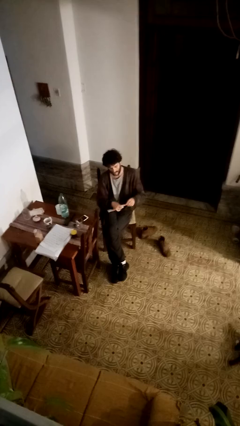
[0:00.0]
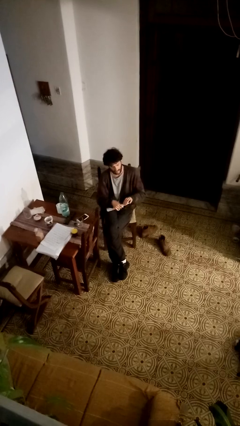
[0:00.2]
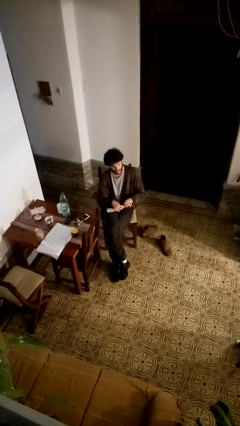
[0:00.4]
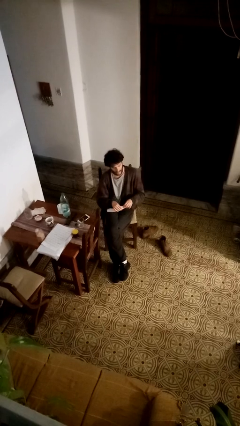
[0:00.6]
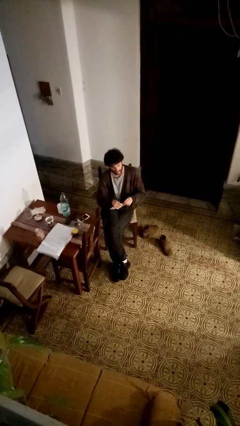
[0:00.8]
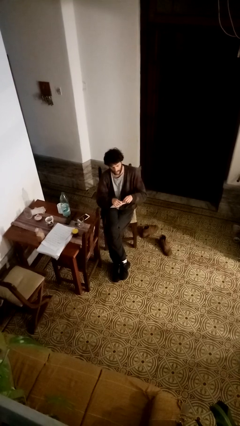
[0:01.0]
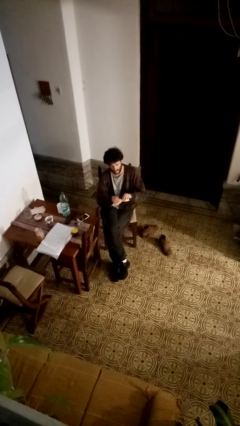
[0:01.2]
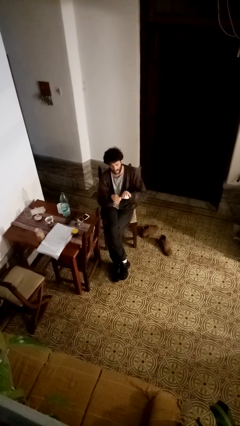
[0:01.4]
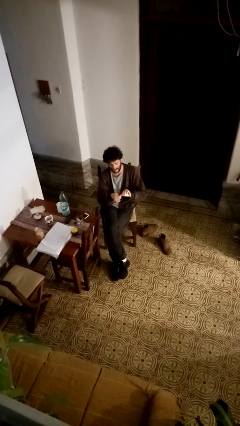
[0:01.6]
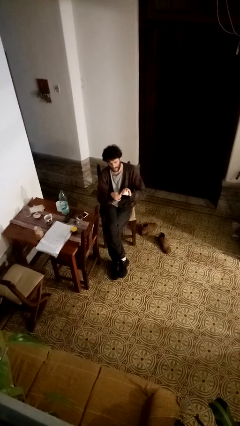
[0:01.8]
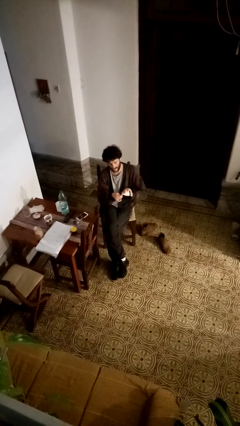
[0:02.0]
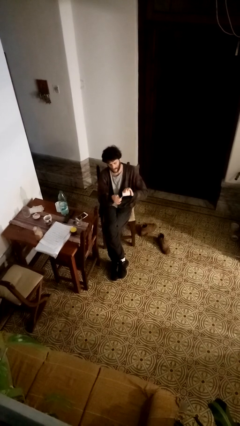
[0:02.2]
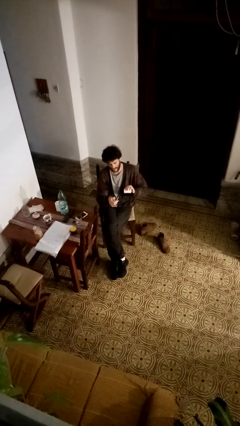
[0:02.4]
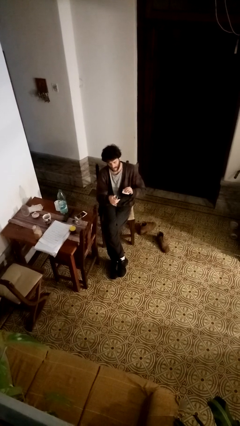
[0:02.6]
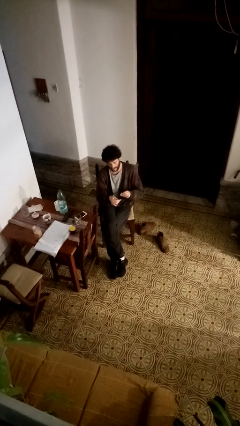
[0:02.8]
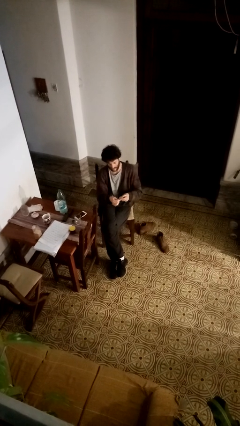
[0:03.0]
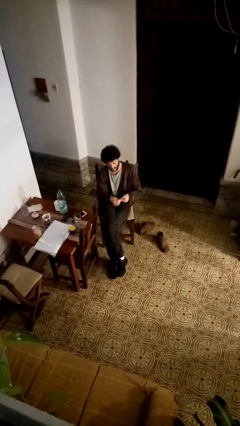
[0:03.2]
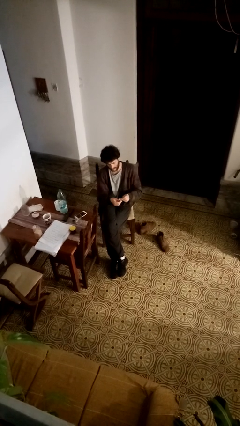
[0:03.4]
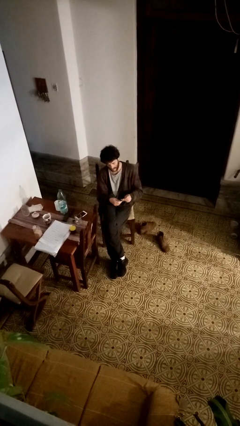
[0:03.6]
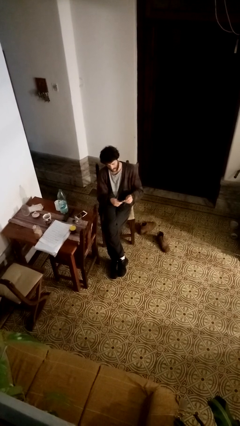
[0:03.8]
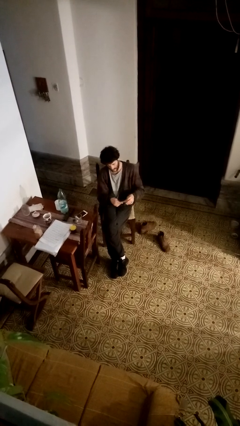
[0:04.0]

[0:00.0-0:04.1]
person tears paper

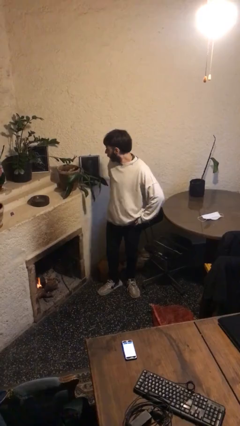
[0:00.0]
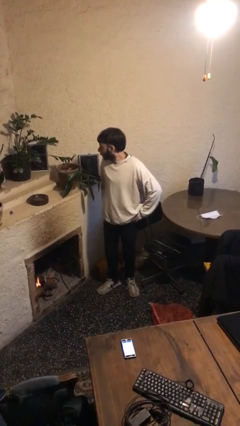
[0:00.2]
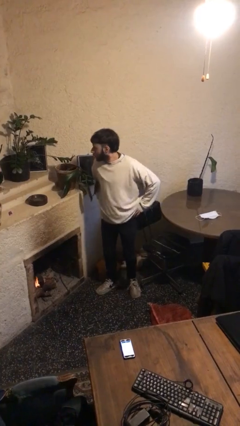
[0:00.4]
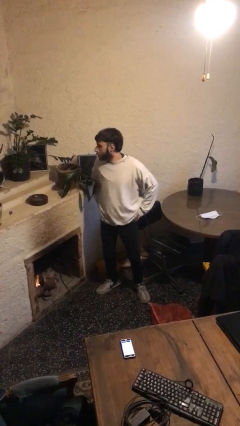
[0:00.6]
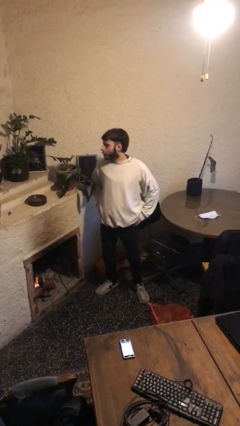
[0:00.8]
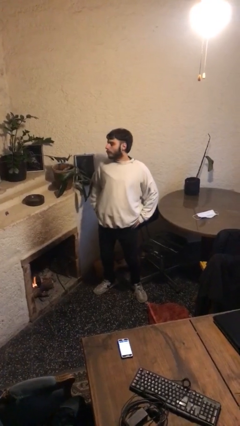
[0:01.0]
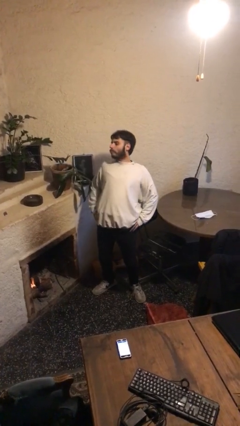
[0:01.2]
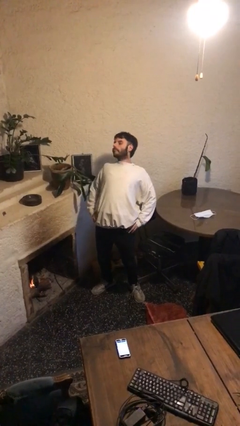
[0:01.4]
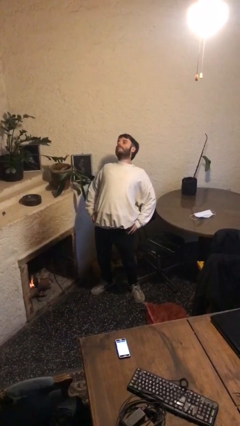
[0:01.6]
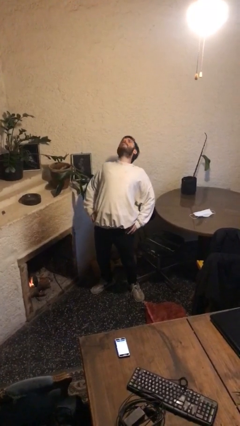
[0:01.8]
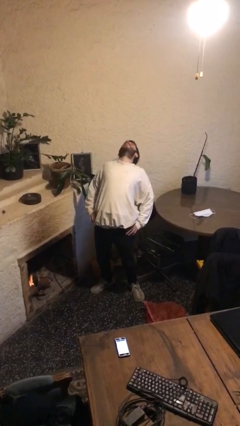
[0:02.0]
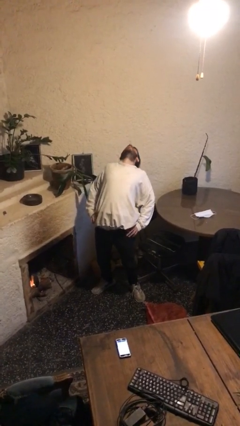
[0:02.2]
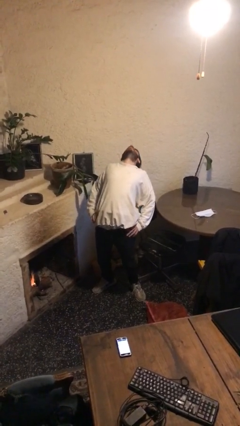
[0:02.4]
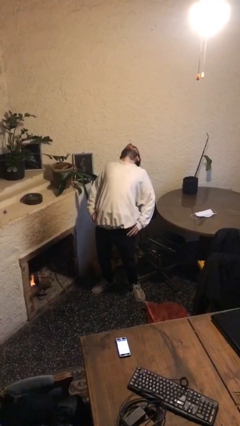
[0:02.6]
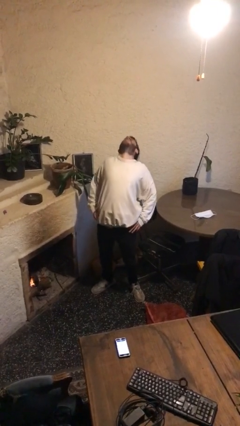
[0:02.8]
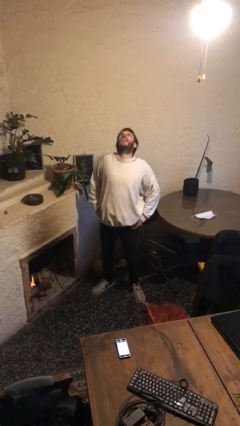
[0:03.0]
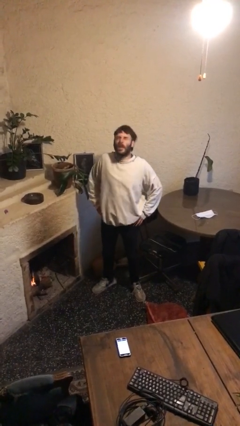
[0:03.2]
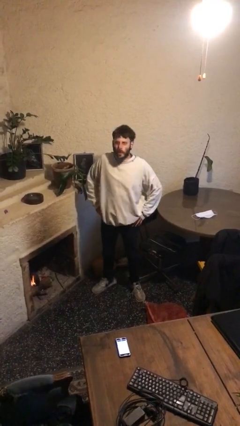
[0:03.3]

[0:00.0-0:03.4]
person stretches back

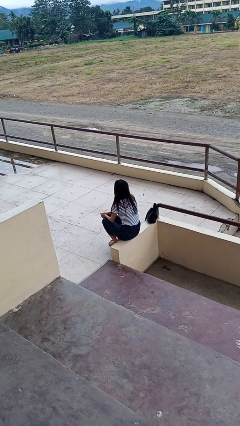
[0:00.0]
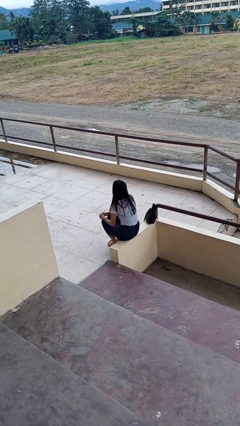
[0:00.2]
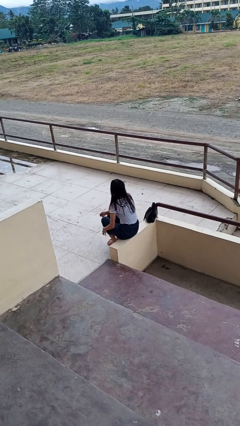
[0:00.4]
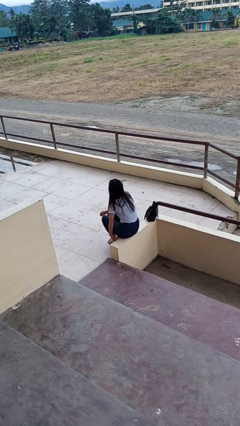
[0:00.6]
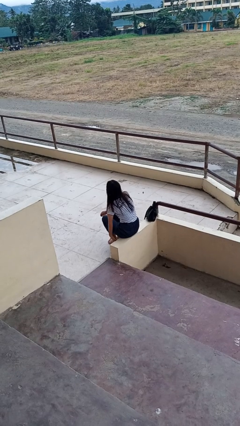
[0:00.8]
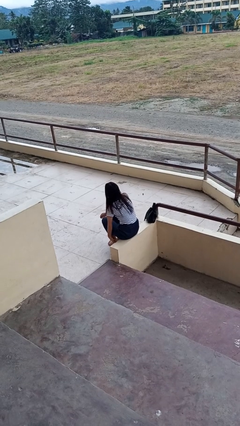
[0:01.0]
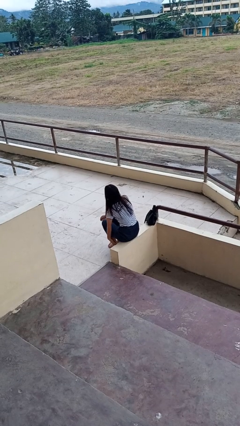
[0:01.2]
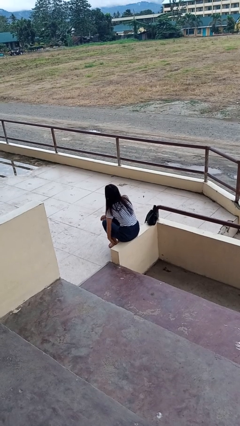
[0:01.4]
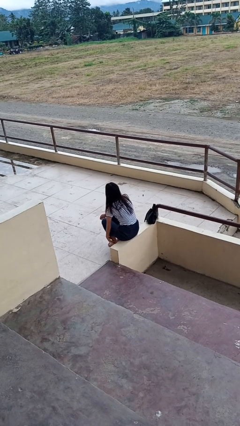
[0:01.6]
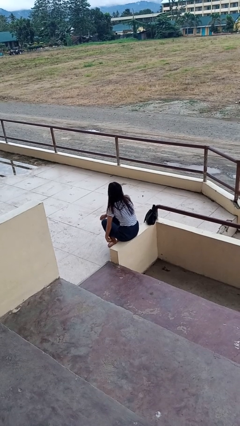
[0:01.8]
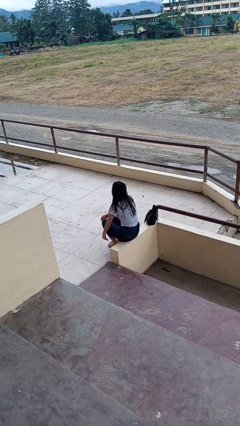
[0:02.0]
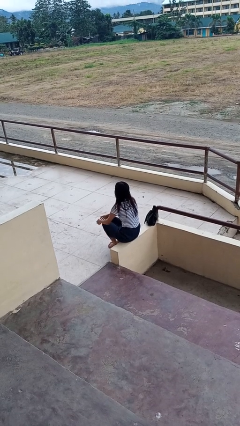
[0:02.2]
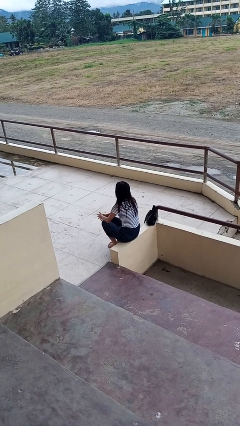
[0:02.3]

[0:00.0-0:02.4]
person rubs foot

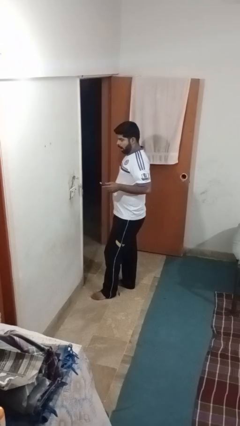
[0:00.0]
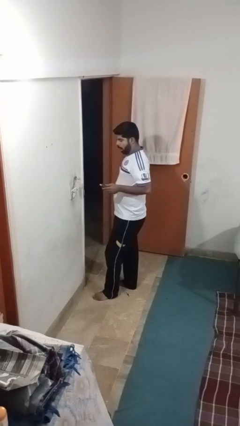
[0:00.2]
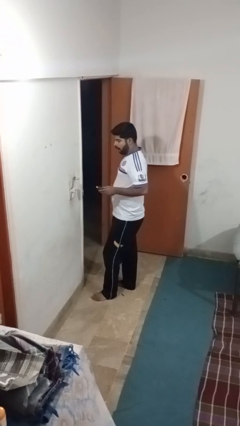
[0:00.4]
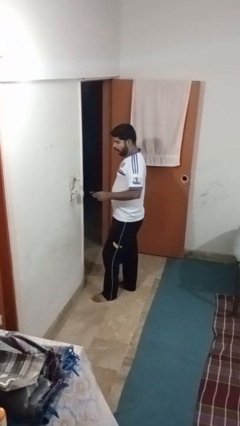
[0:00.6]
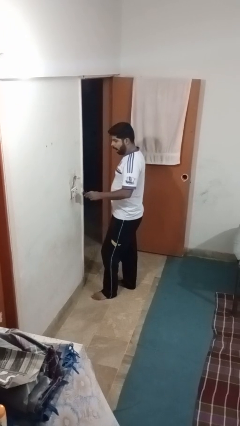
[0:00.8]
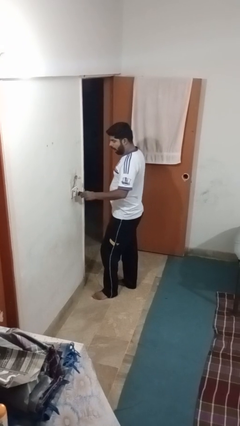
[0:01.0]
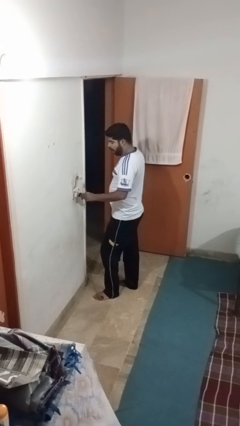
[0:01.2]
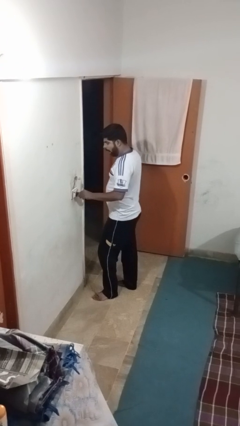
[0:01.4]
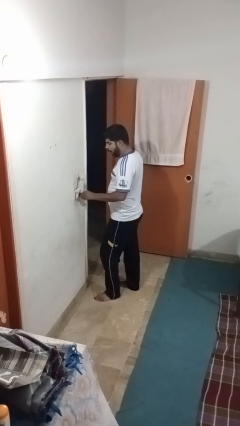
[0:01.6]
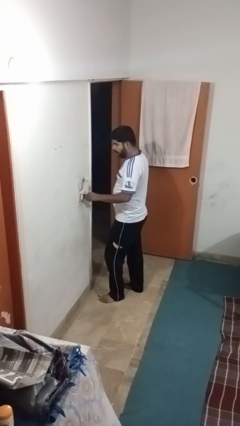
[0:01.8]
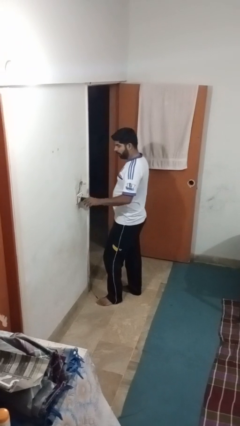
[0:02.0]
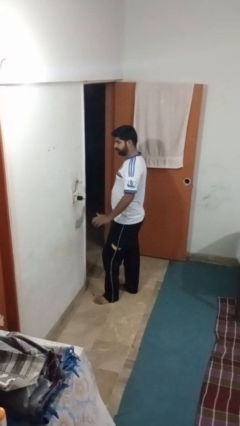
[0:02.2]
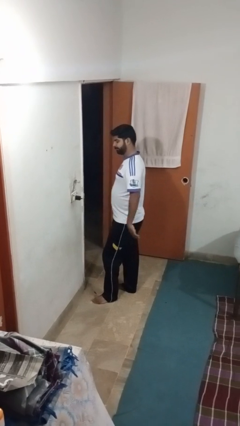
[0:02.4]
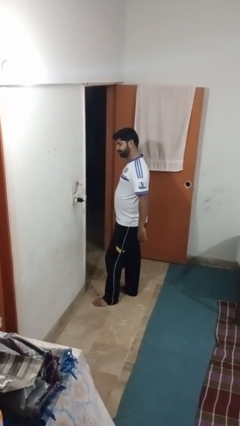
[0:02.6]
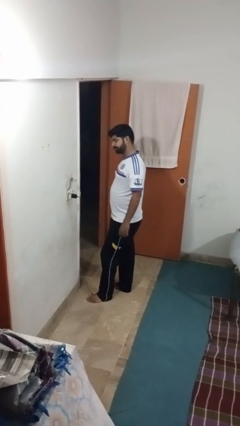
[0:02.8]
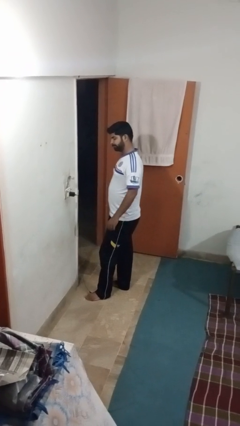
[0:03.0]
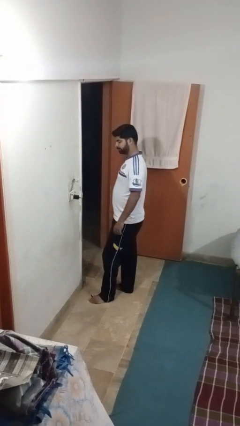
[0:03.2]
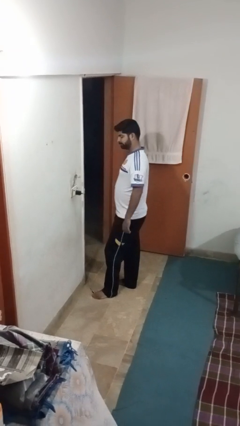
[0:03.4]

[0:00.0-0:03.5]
person plugs into electrical socket

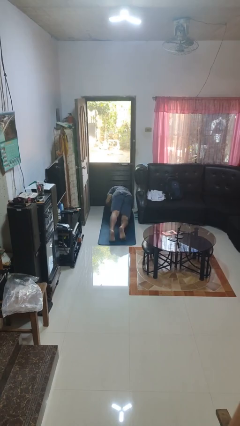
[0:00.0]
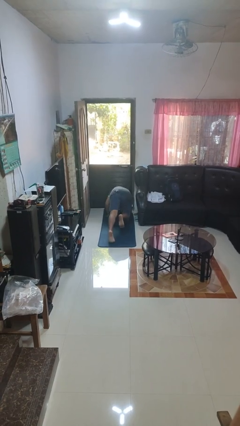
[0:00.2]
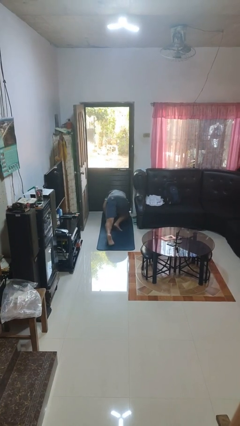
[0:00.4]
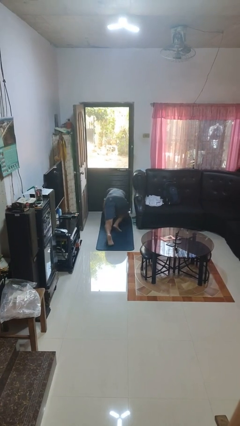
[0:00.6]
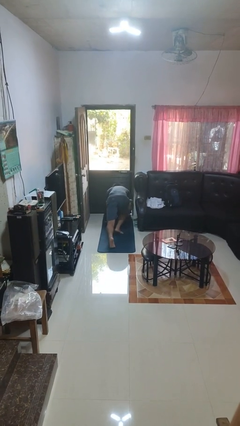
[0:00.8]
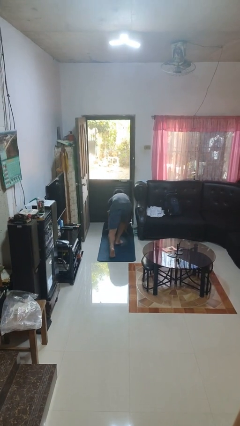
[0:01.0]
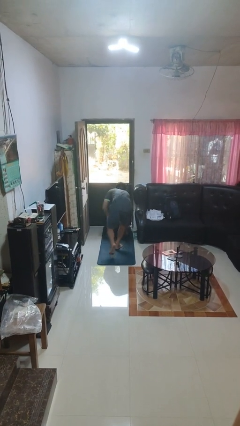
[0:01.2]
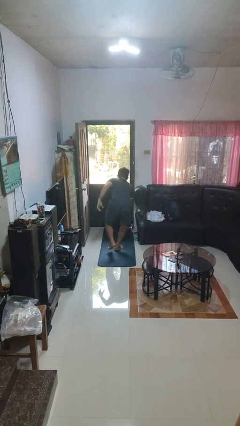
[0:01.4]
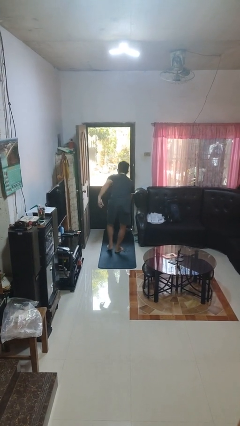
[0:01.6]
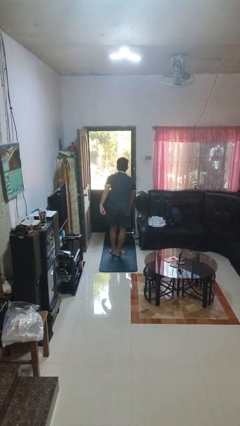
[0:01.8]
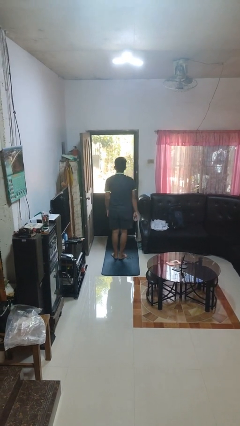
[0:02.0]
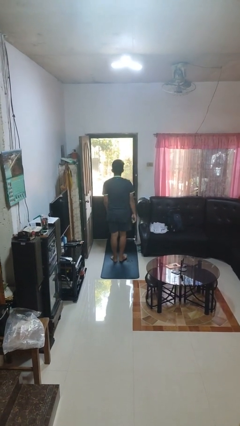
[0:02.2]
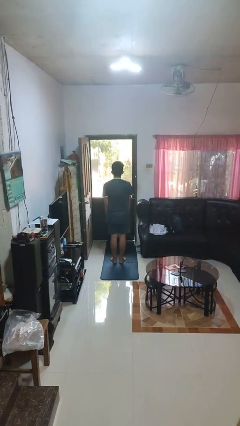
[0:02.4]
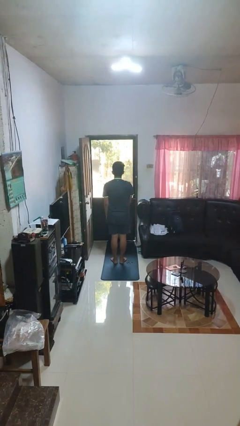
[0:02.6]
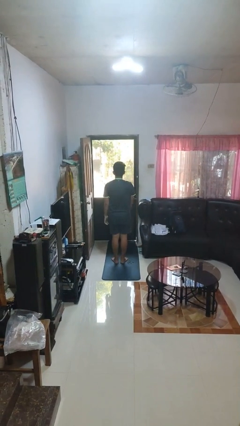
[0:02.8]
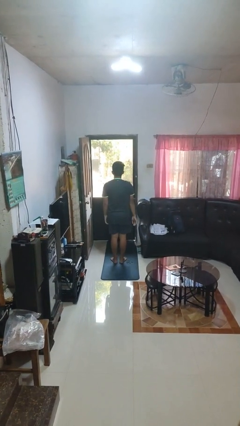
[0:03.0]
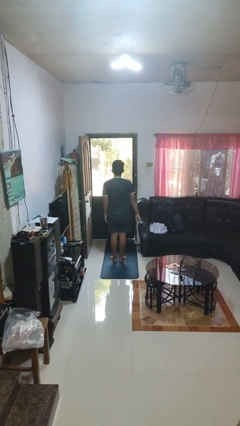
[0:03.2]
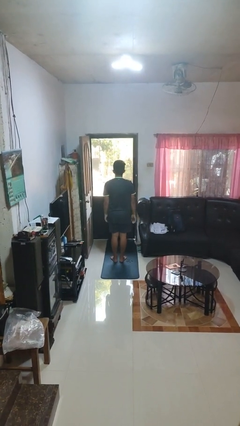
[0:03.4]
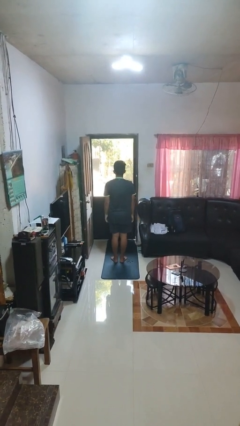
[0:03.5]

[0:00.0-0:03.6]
person stands up from floor

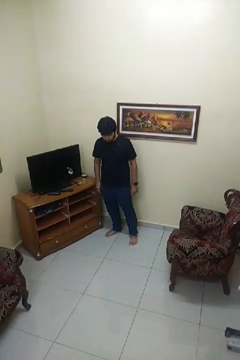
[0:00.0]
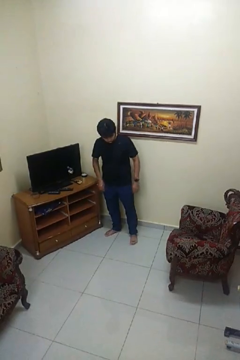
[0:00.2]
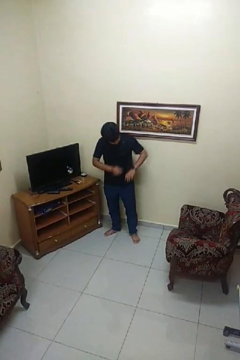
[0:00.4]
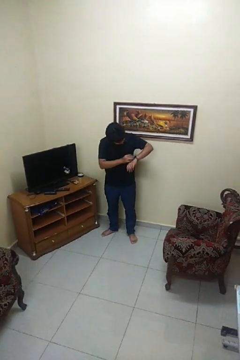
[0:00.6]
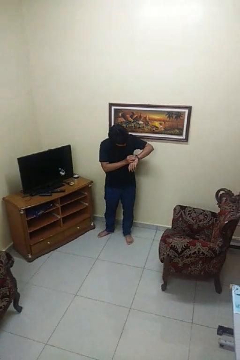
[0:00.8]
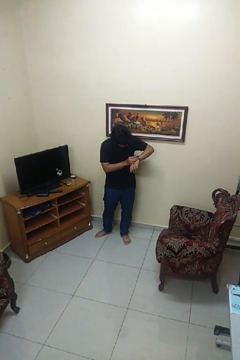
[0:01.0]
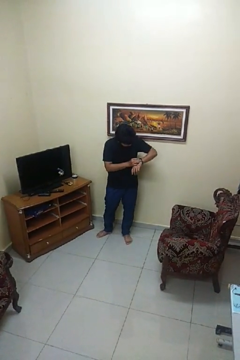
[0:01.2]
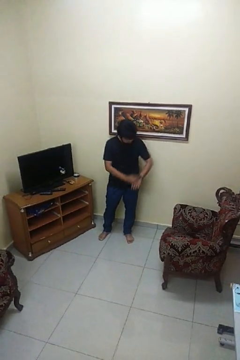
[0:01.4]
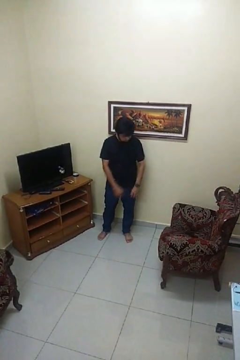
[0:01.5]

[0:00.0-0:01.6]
person looks at wristwatch
